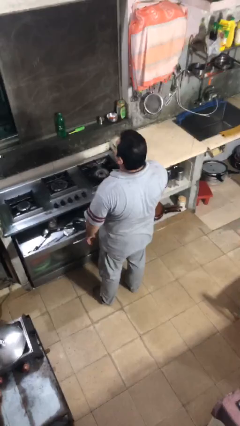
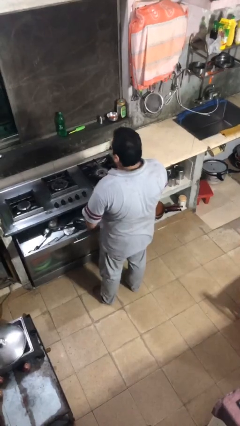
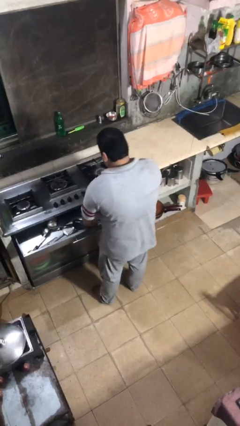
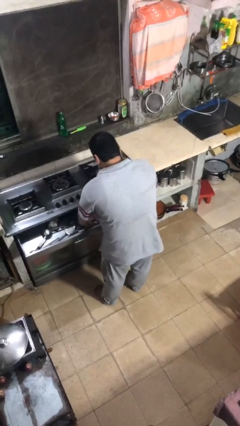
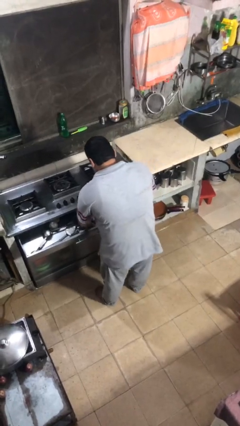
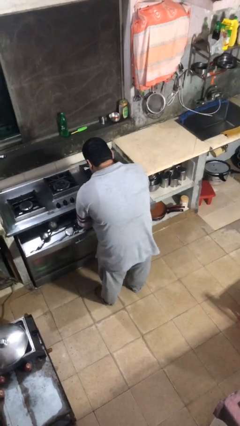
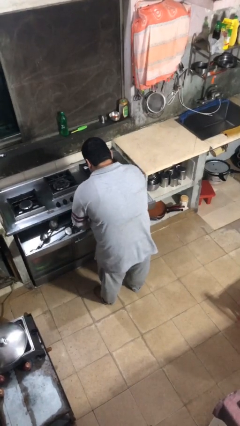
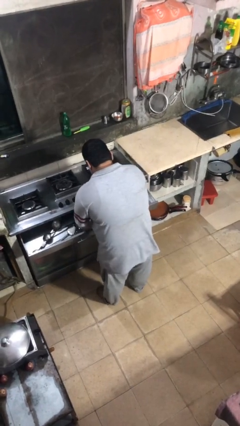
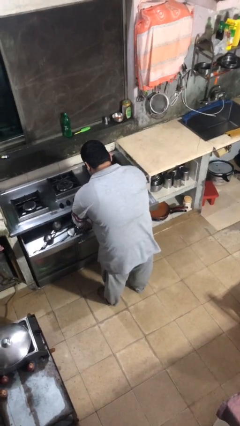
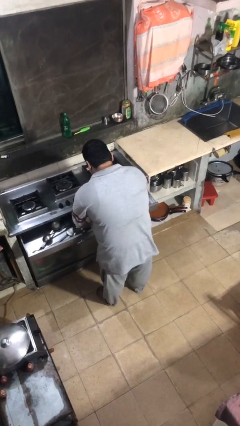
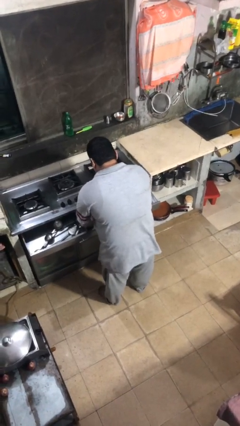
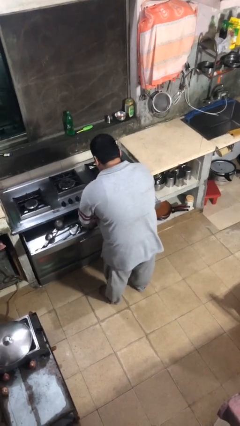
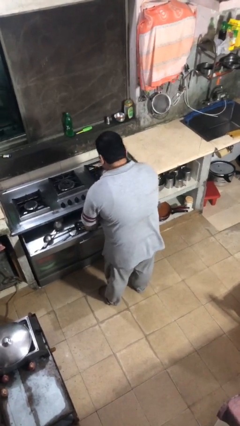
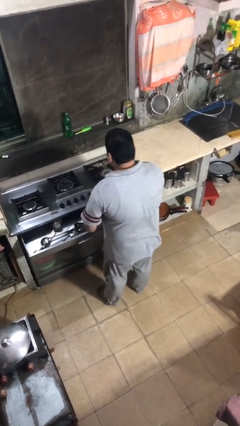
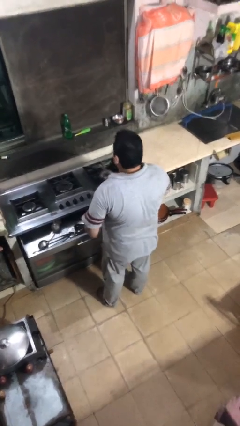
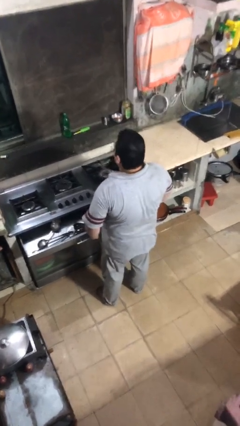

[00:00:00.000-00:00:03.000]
person searches in kitchen drawer

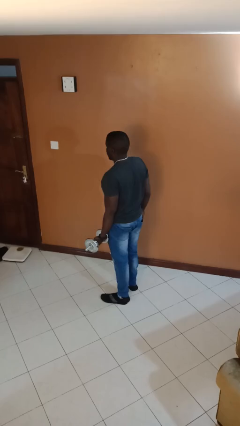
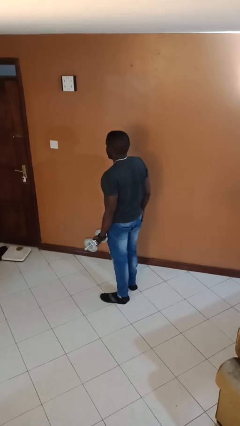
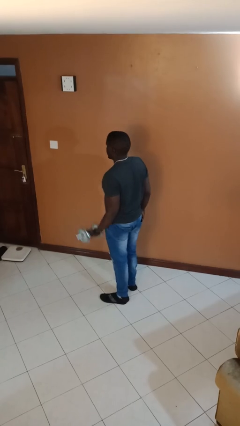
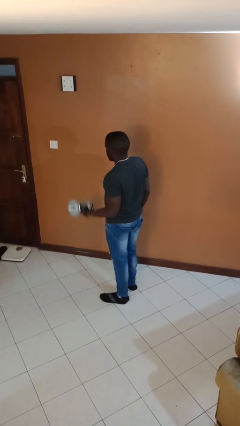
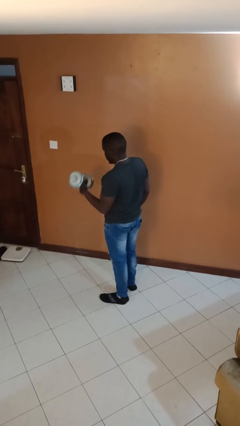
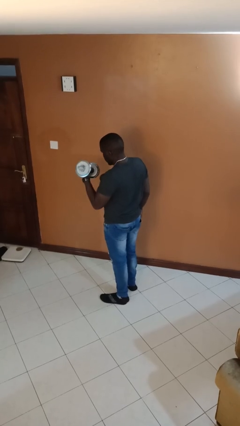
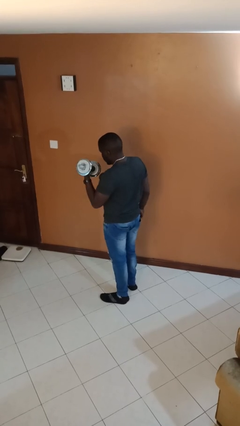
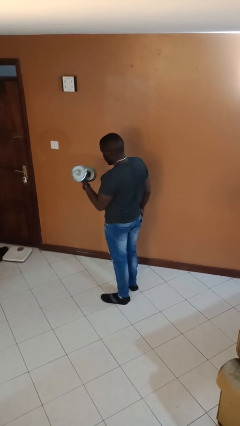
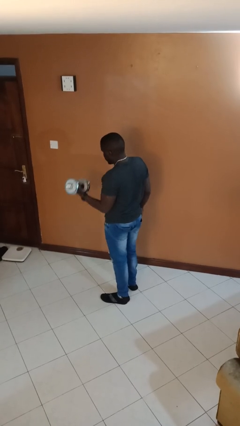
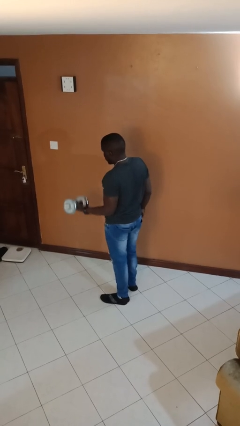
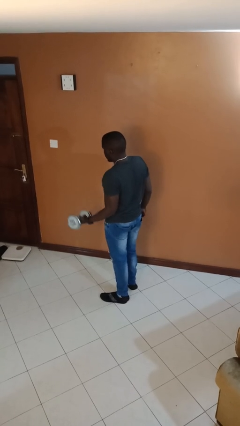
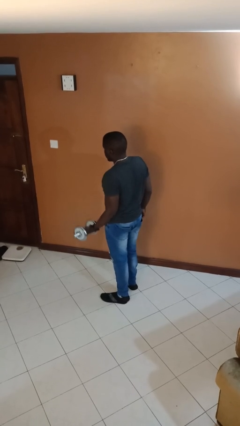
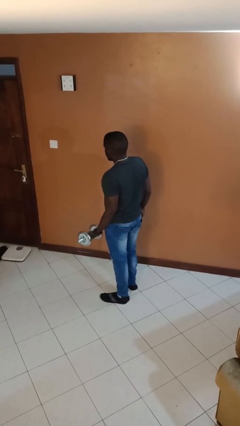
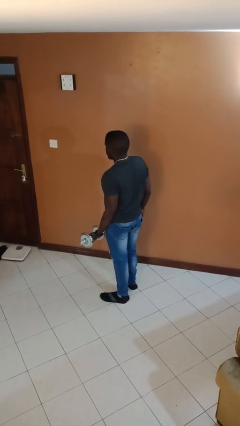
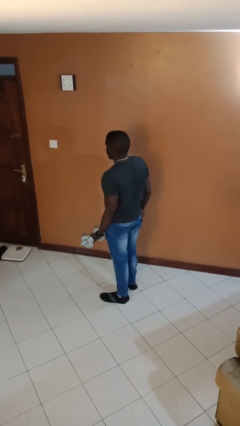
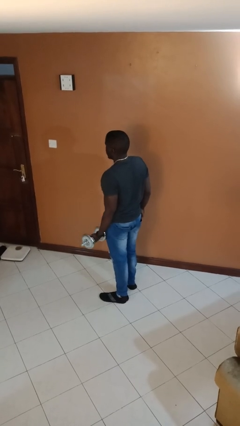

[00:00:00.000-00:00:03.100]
person lifts dumbbells

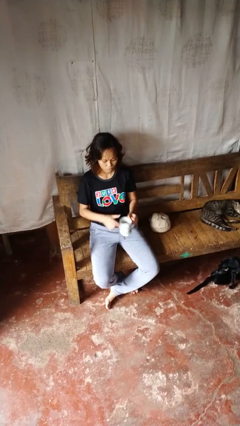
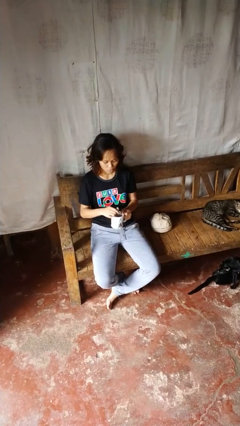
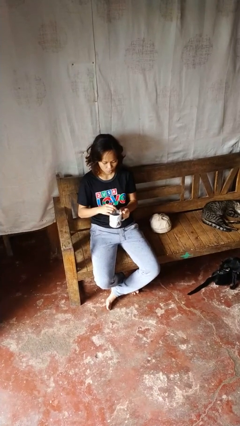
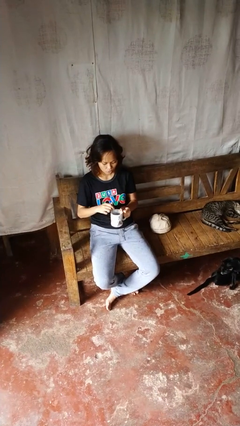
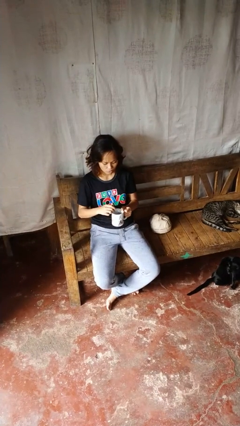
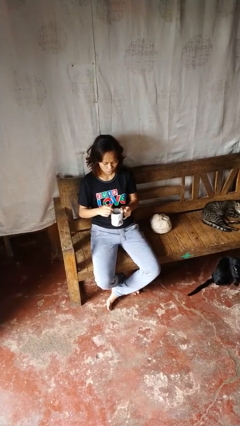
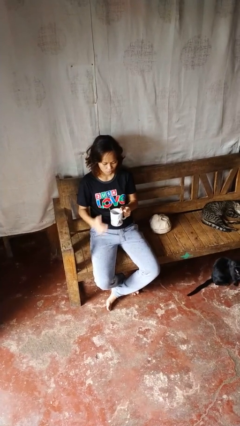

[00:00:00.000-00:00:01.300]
person stirs mug

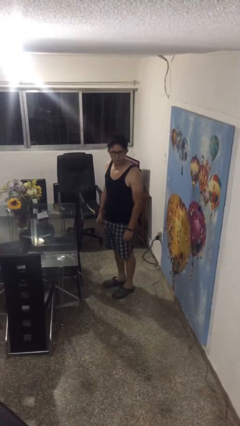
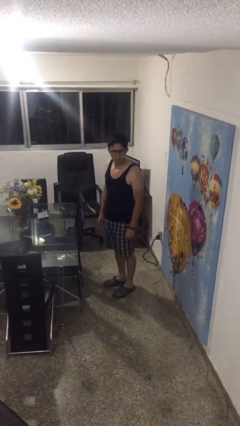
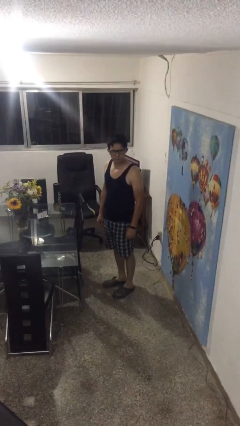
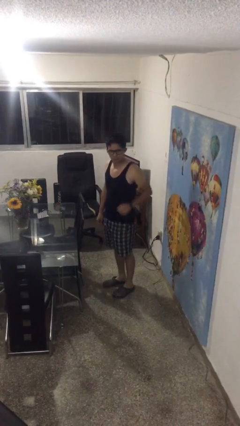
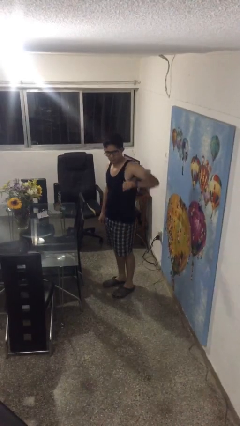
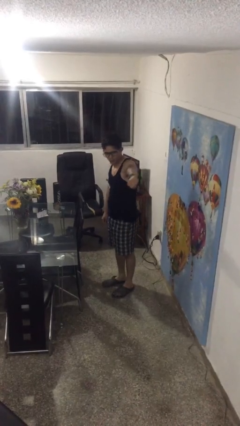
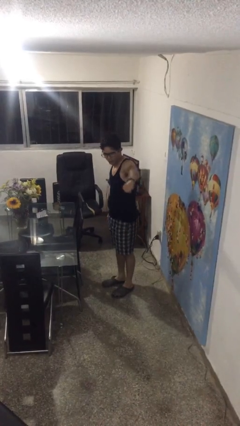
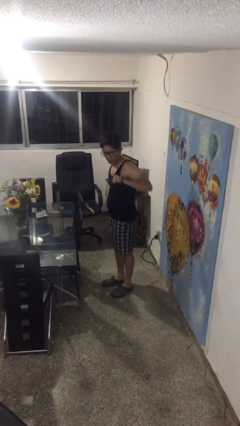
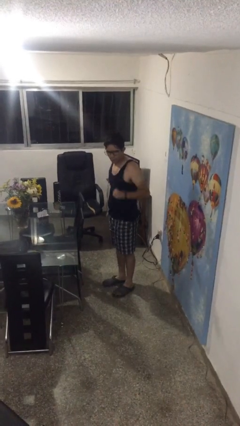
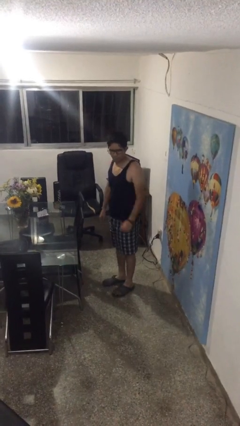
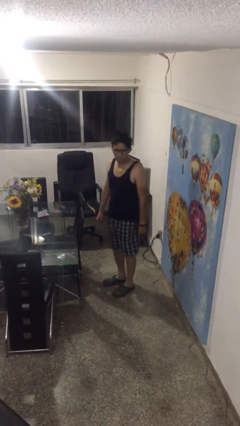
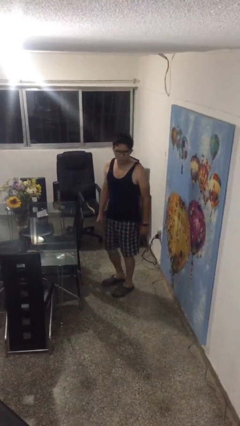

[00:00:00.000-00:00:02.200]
person karate chop

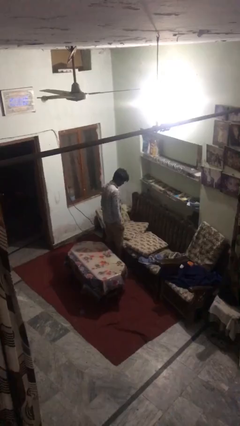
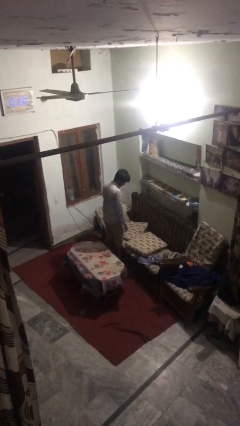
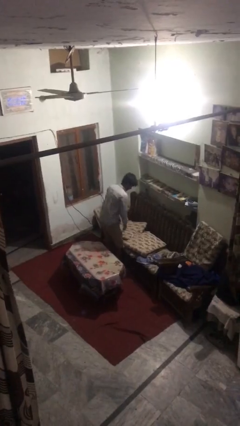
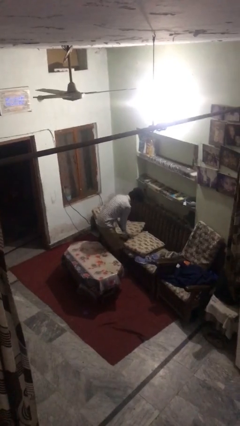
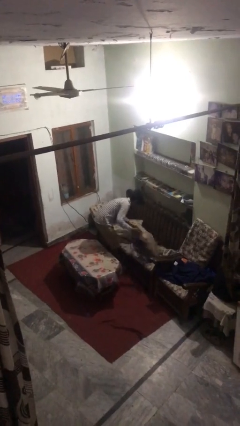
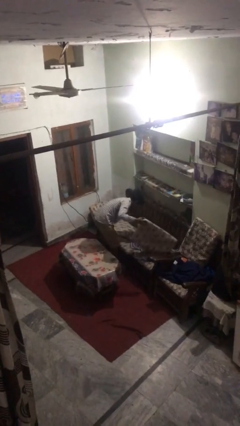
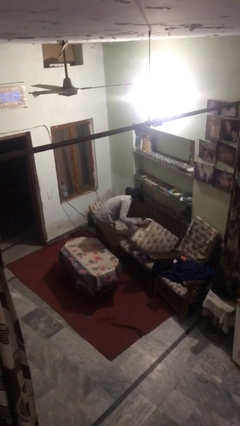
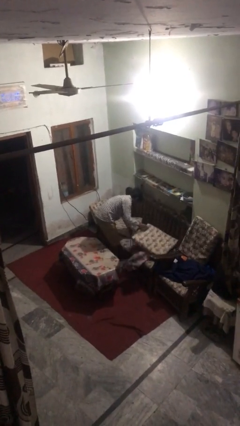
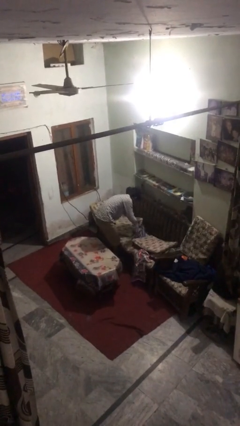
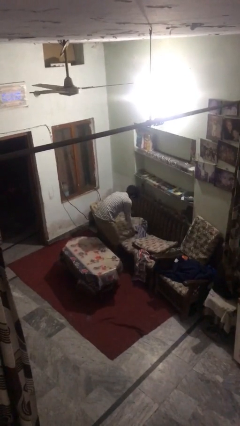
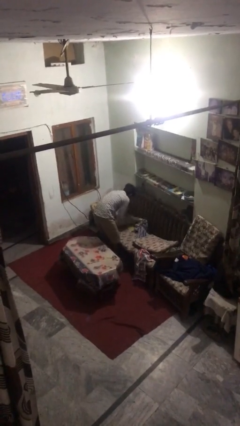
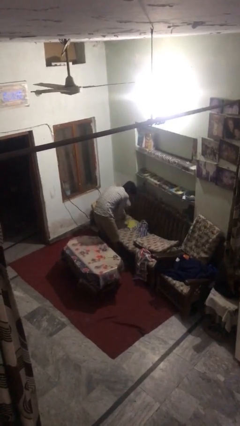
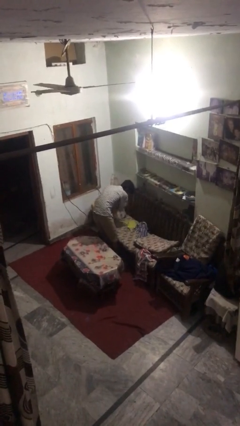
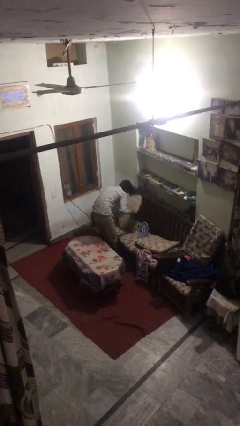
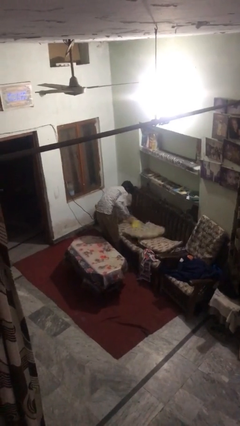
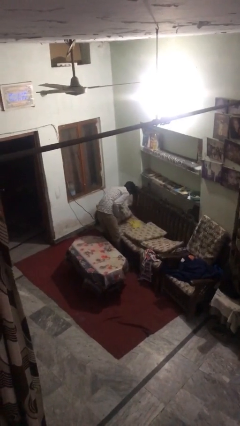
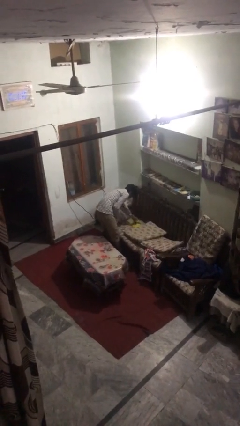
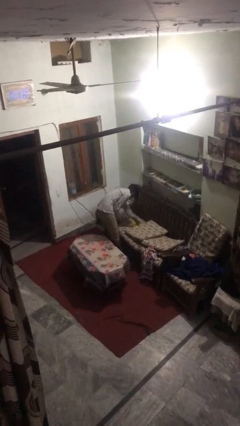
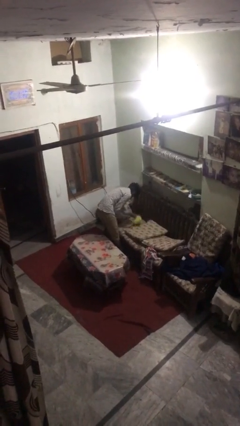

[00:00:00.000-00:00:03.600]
person searches in couch

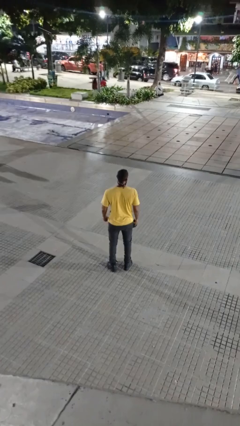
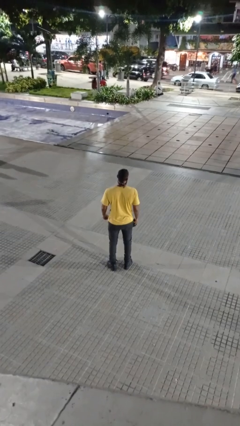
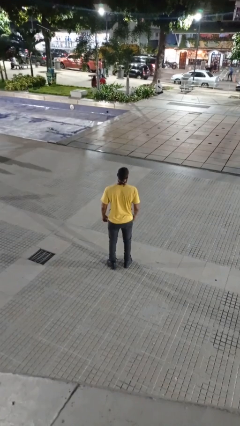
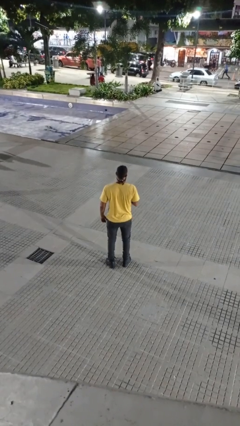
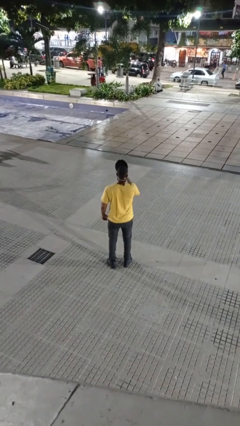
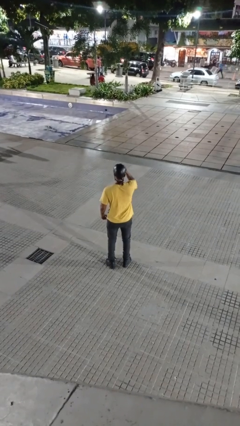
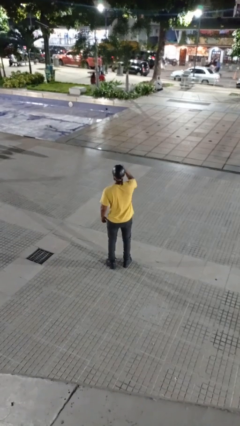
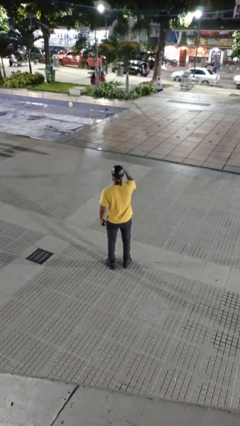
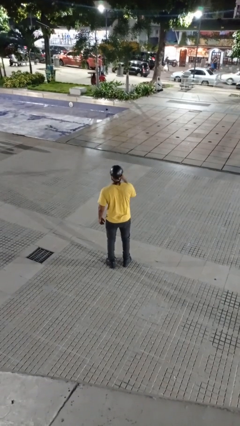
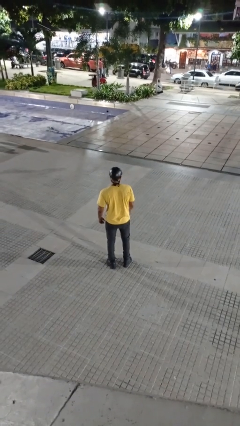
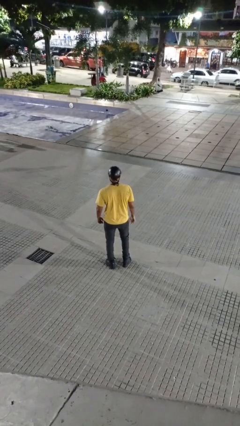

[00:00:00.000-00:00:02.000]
person puts on hat

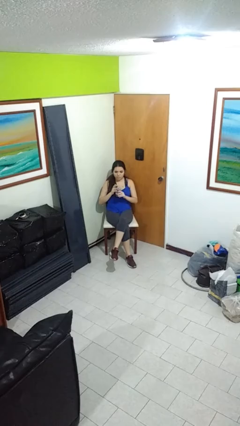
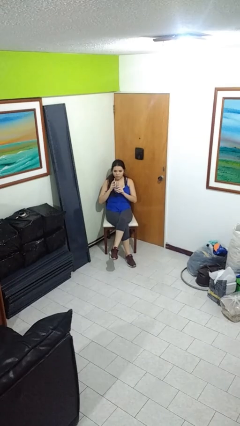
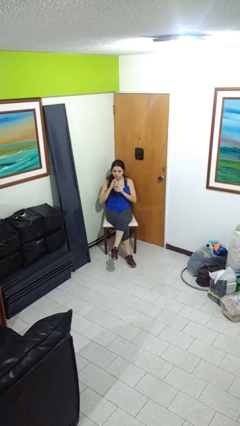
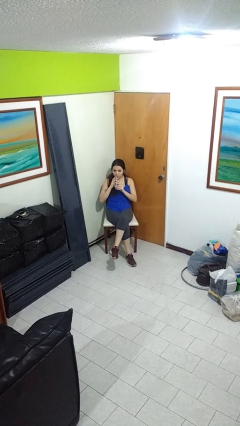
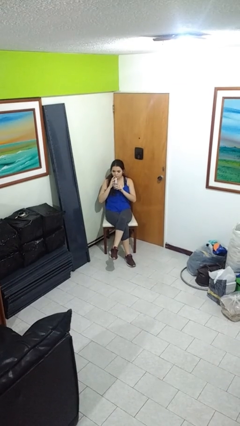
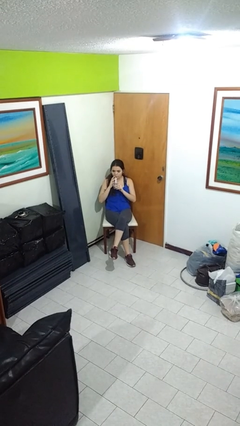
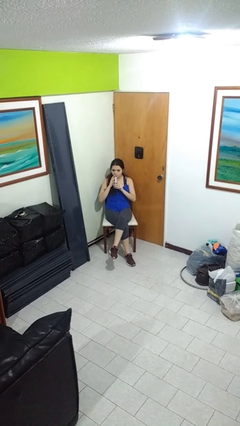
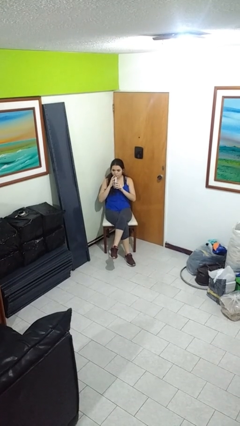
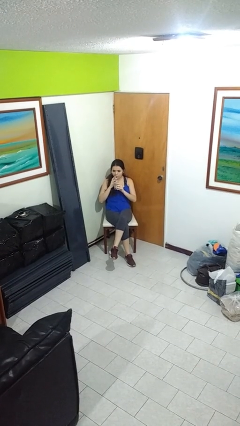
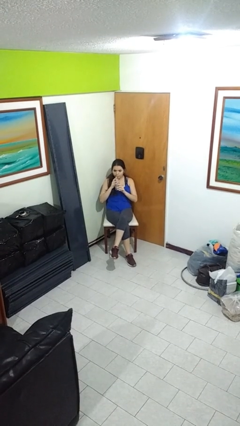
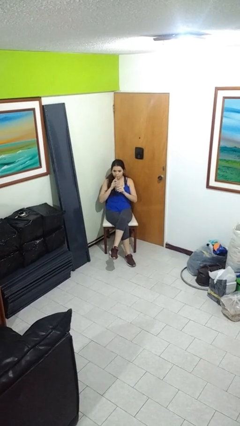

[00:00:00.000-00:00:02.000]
person drinks from straw
